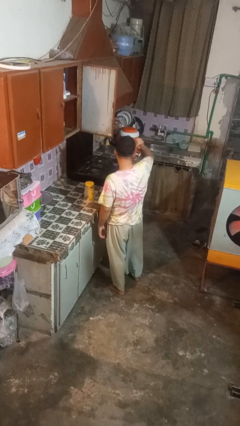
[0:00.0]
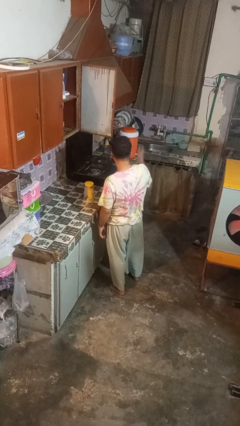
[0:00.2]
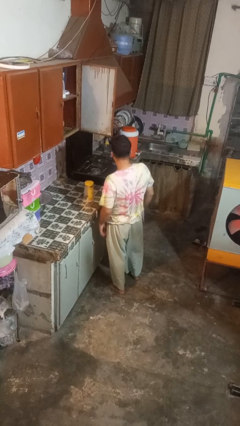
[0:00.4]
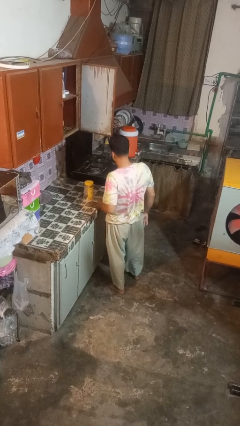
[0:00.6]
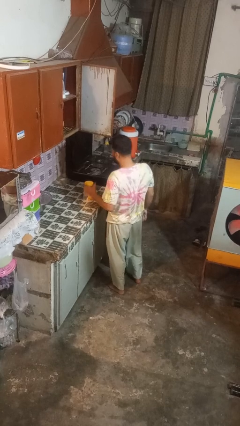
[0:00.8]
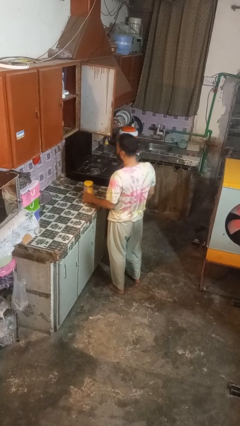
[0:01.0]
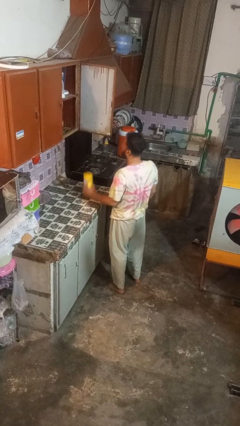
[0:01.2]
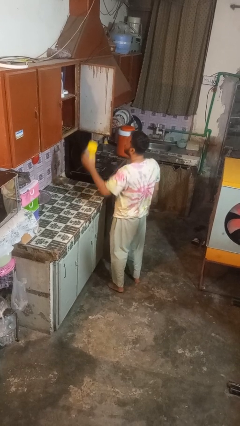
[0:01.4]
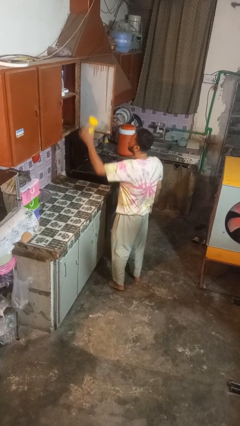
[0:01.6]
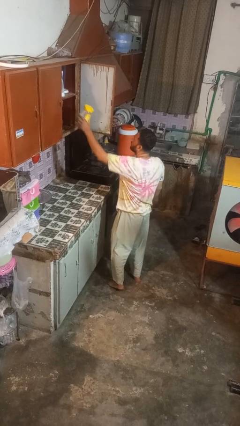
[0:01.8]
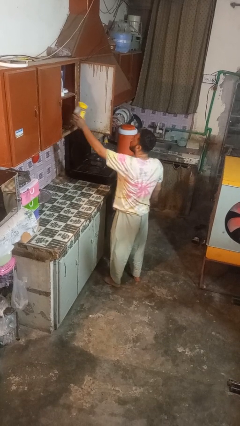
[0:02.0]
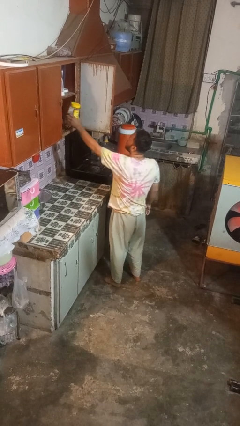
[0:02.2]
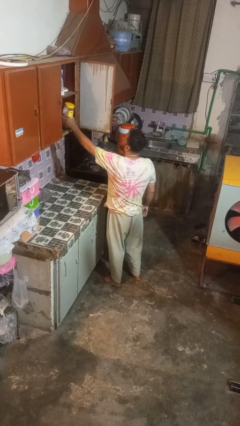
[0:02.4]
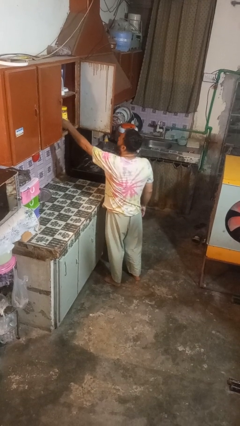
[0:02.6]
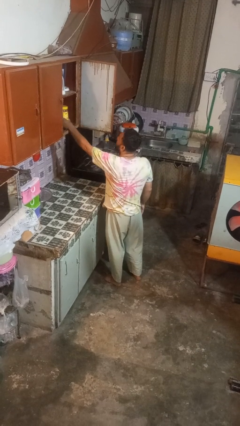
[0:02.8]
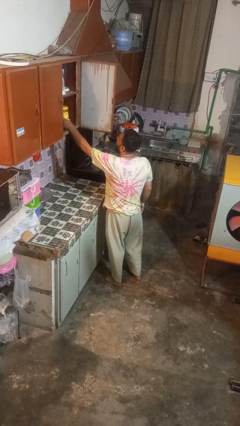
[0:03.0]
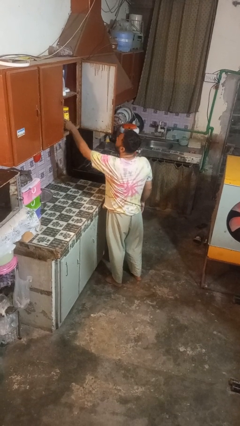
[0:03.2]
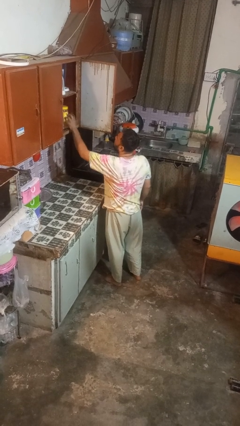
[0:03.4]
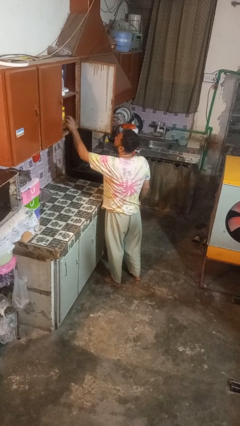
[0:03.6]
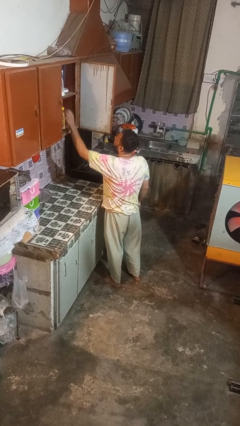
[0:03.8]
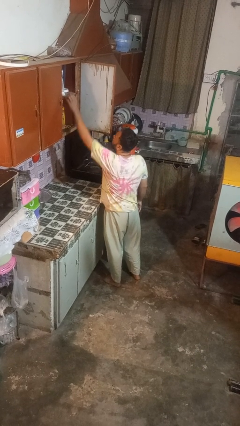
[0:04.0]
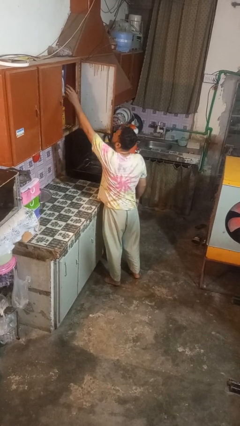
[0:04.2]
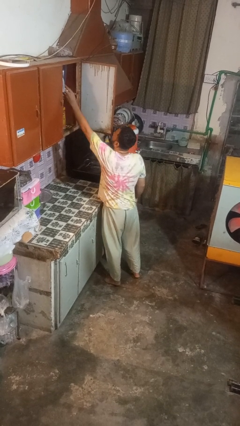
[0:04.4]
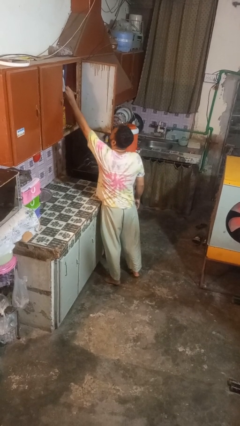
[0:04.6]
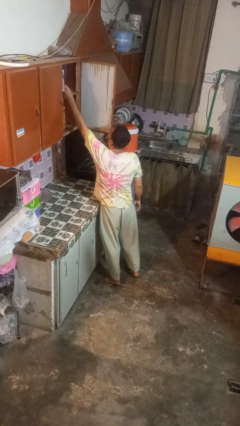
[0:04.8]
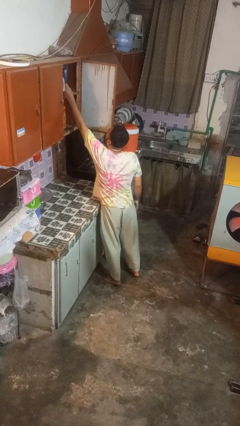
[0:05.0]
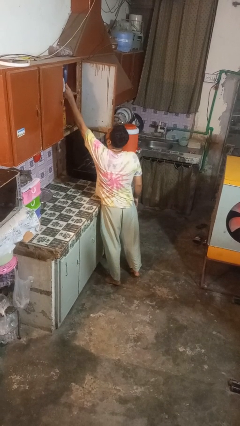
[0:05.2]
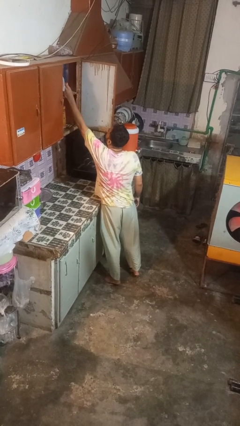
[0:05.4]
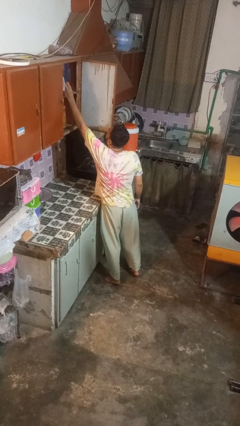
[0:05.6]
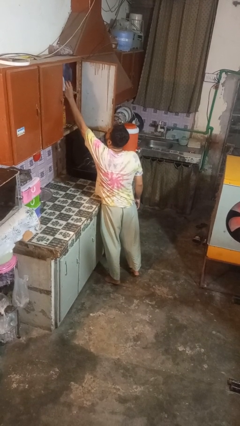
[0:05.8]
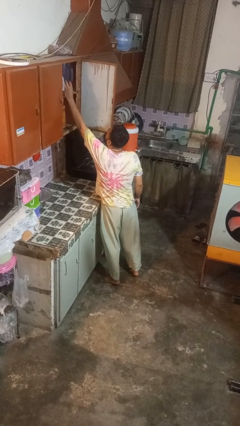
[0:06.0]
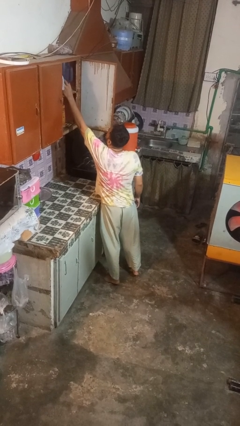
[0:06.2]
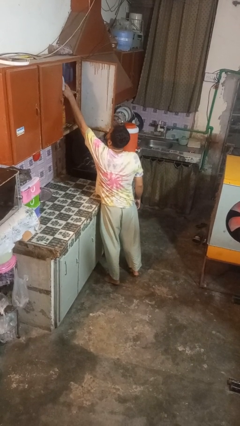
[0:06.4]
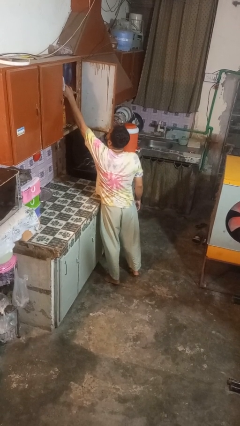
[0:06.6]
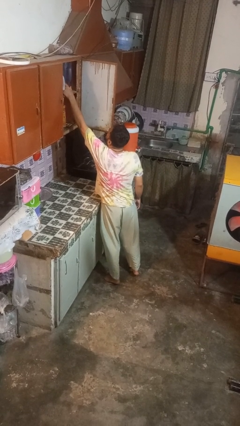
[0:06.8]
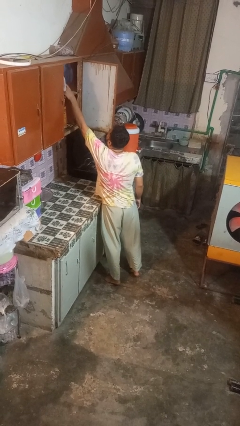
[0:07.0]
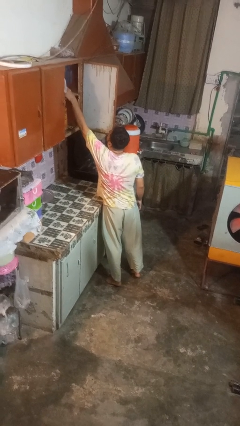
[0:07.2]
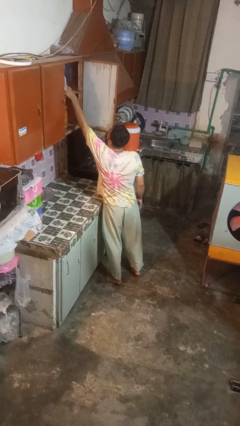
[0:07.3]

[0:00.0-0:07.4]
person puts object in cabinet

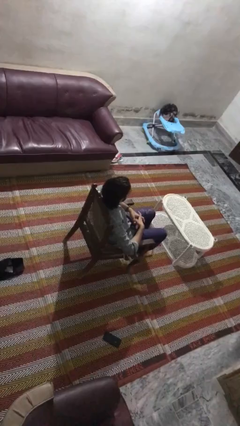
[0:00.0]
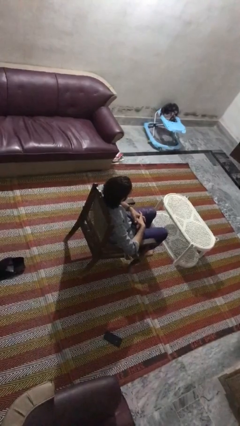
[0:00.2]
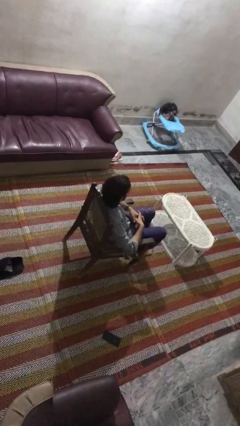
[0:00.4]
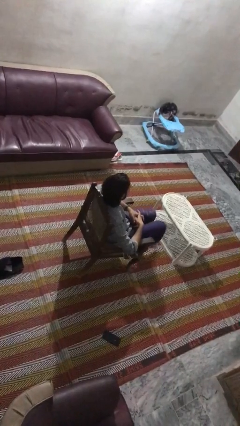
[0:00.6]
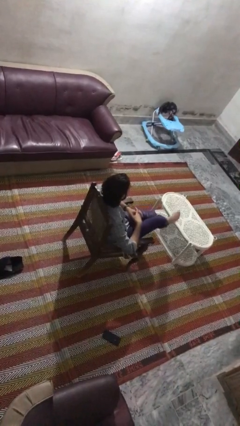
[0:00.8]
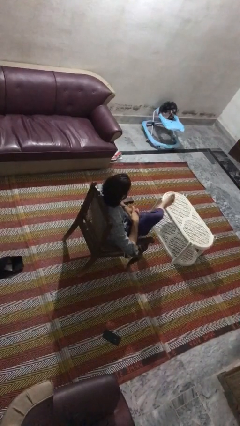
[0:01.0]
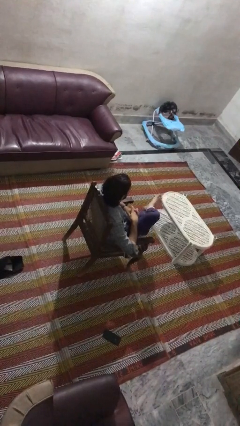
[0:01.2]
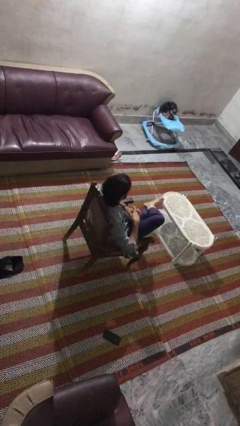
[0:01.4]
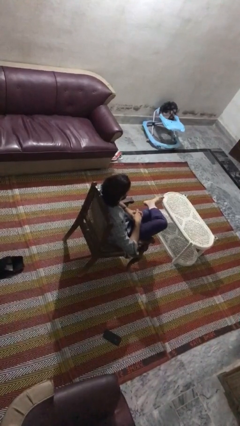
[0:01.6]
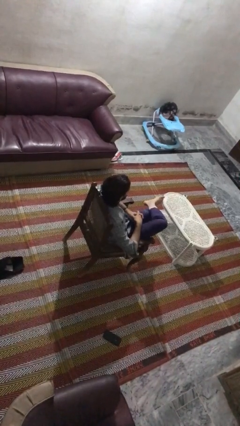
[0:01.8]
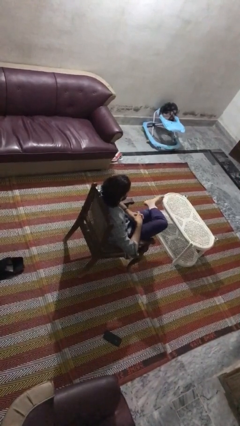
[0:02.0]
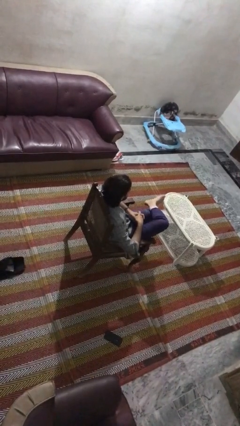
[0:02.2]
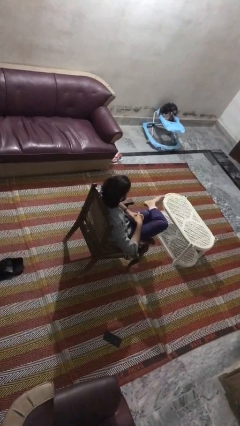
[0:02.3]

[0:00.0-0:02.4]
person crosses legs

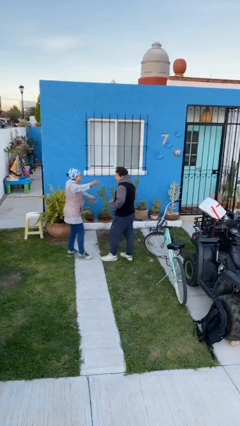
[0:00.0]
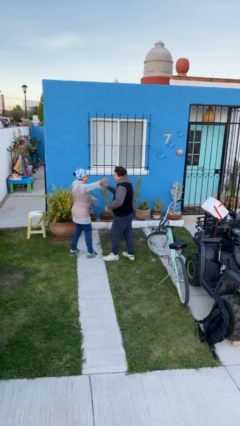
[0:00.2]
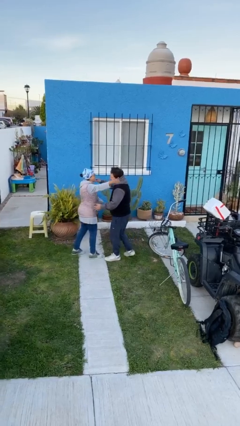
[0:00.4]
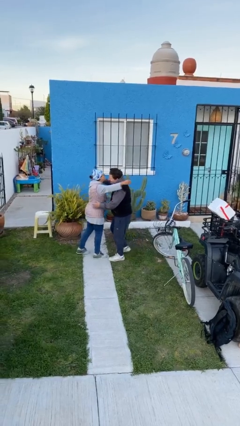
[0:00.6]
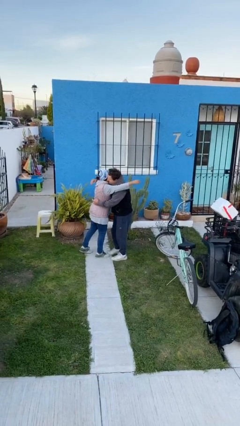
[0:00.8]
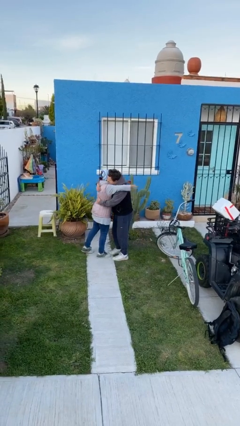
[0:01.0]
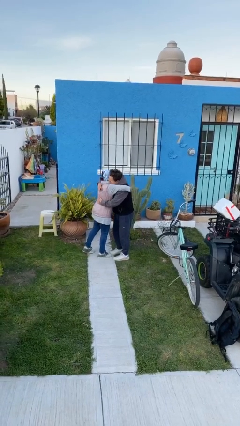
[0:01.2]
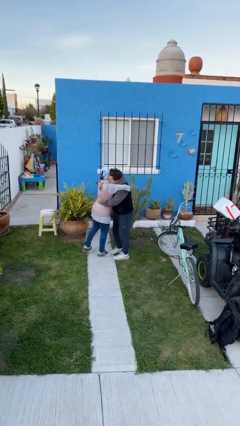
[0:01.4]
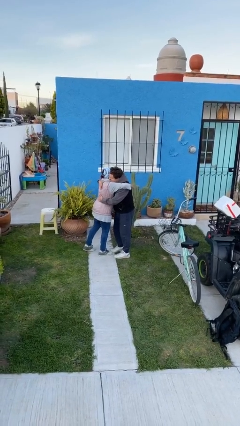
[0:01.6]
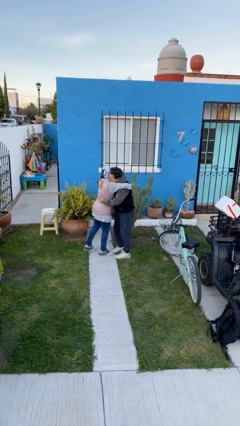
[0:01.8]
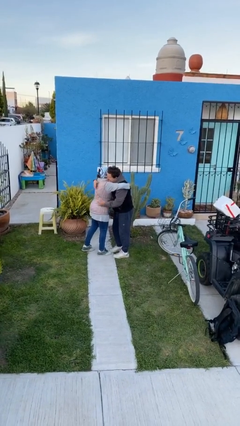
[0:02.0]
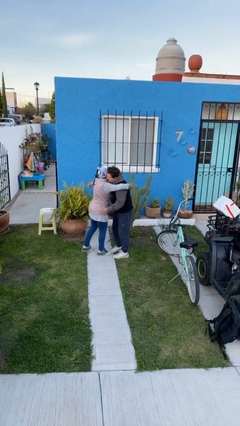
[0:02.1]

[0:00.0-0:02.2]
person embraces person

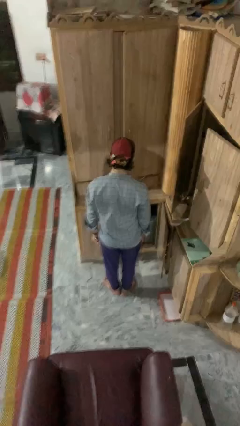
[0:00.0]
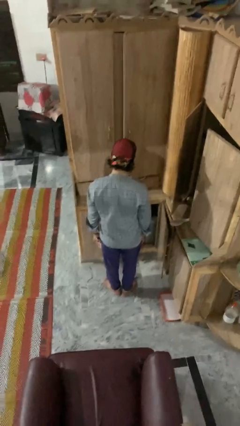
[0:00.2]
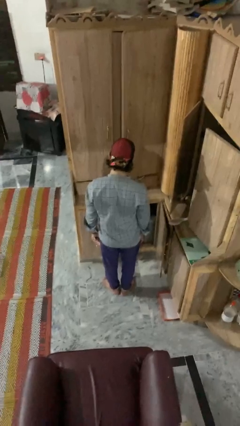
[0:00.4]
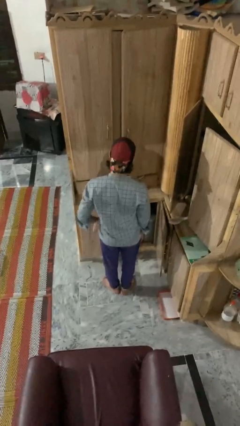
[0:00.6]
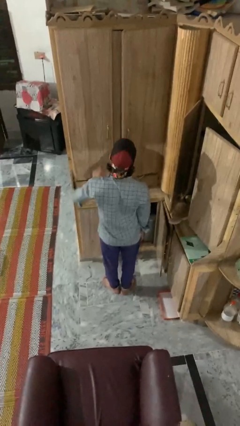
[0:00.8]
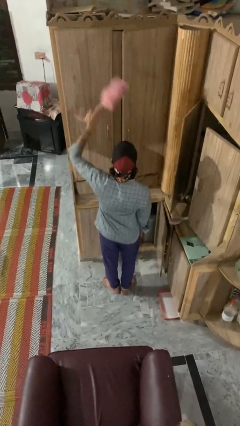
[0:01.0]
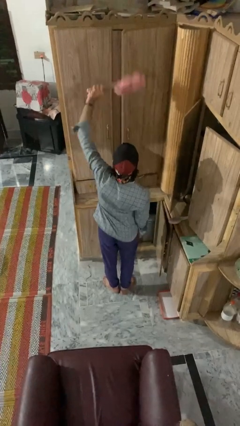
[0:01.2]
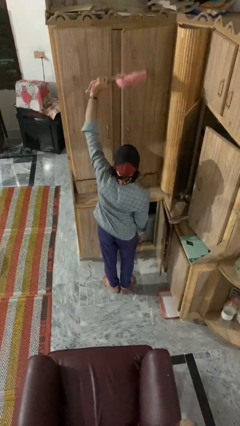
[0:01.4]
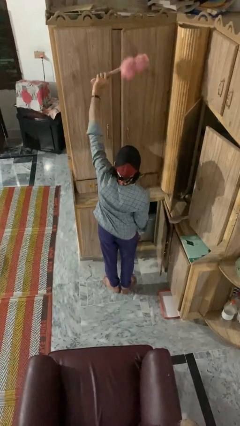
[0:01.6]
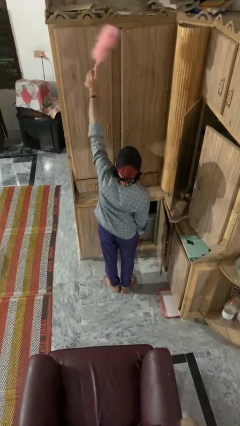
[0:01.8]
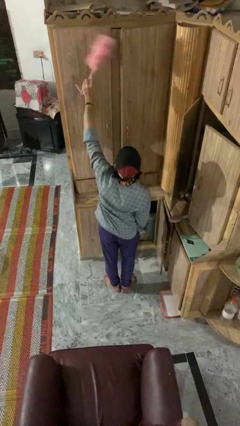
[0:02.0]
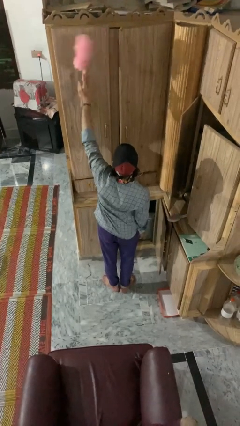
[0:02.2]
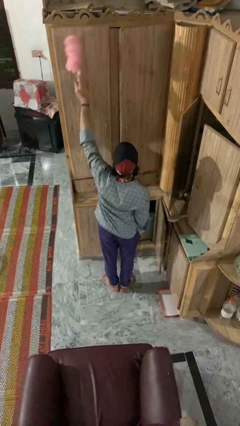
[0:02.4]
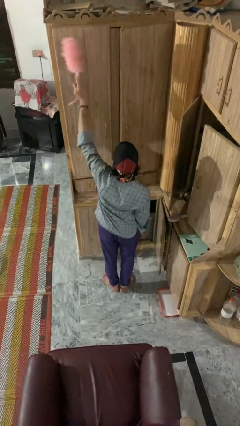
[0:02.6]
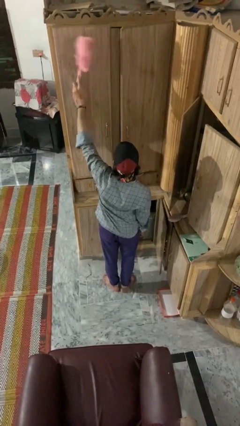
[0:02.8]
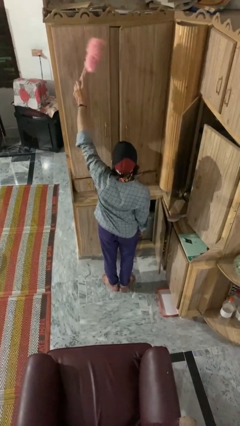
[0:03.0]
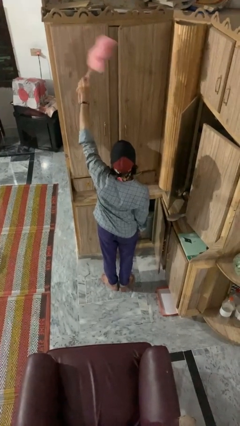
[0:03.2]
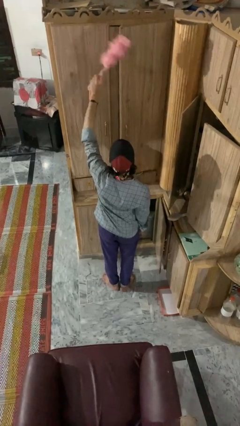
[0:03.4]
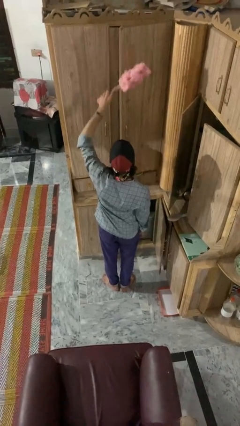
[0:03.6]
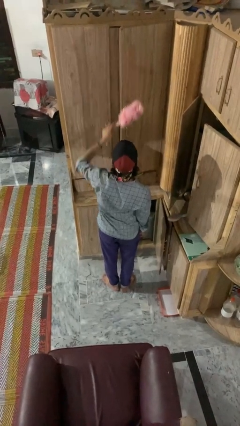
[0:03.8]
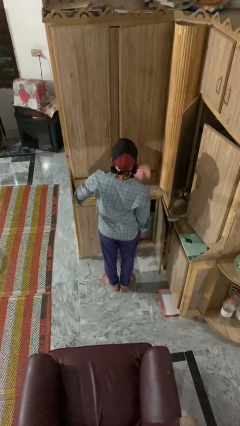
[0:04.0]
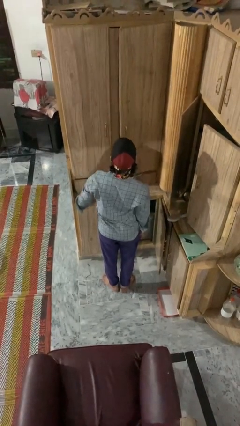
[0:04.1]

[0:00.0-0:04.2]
person dusts furniture

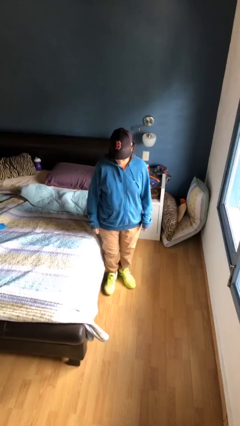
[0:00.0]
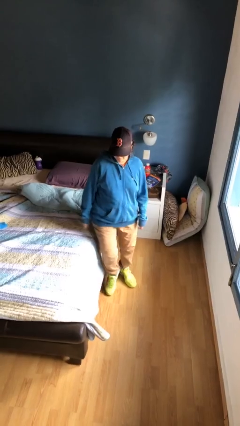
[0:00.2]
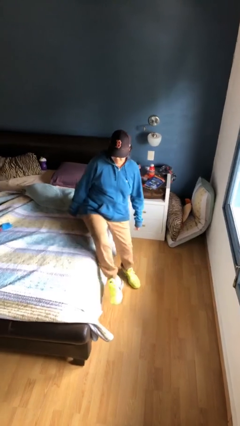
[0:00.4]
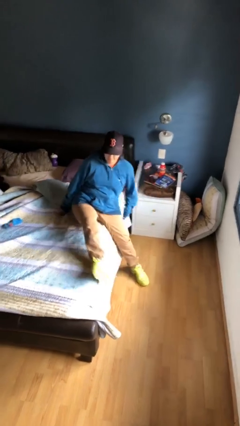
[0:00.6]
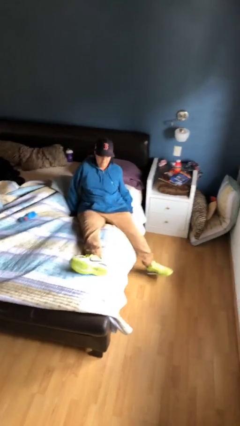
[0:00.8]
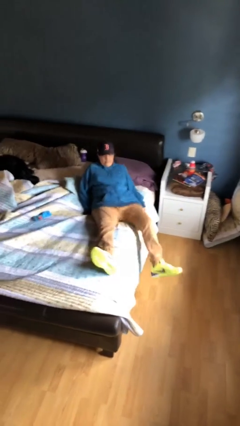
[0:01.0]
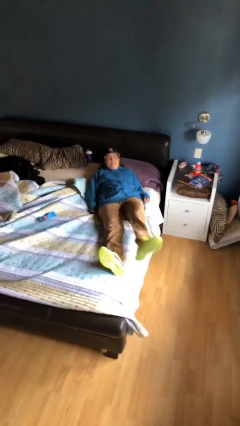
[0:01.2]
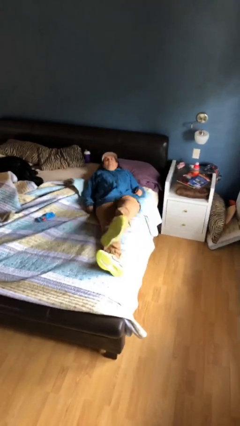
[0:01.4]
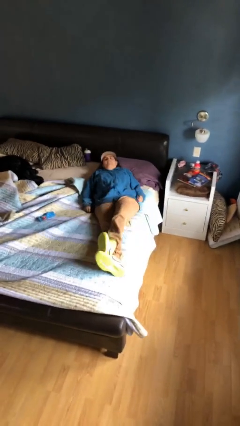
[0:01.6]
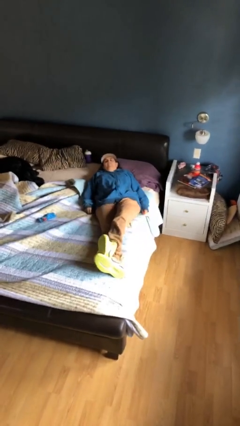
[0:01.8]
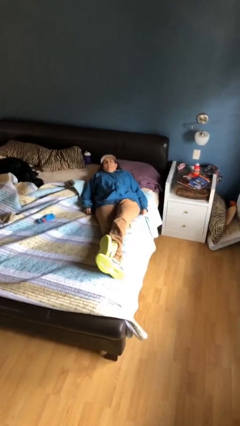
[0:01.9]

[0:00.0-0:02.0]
person lies down on bed
